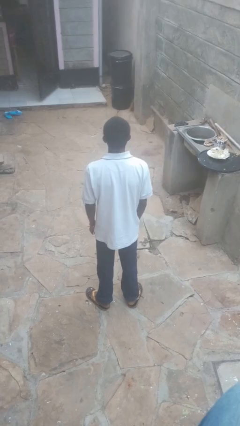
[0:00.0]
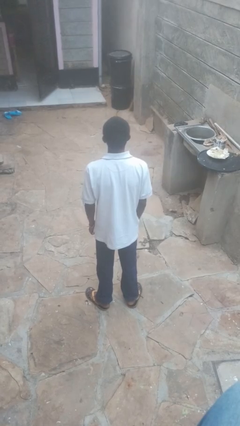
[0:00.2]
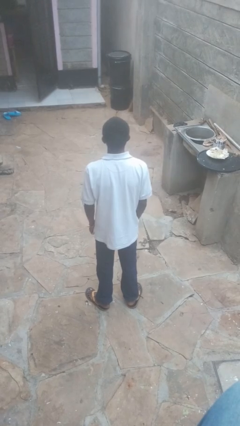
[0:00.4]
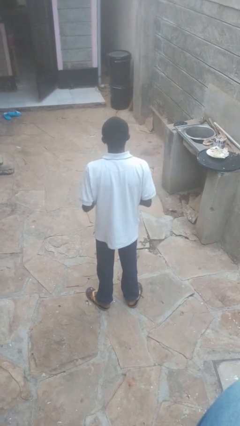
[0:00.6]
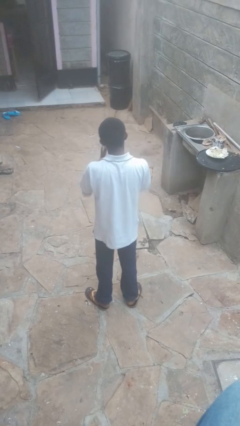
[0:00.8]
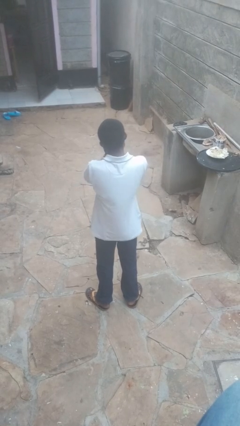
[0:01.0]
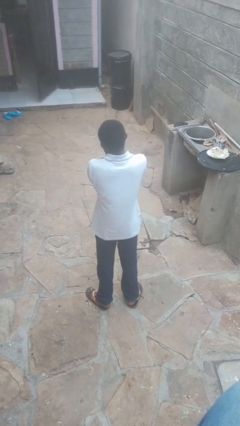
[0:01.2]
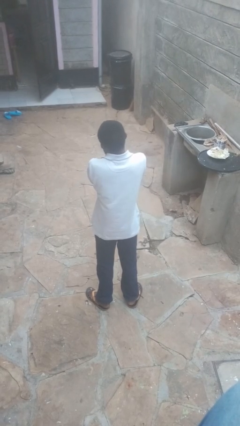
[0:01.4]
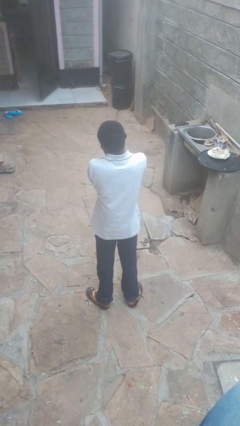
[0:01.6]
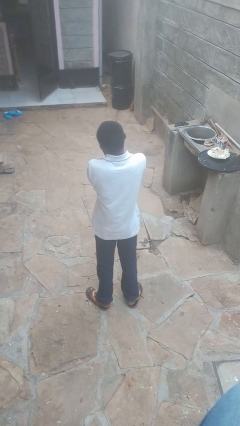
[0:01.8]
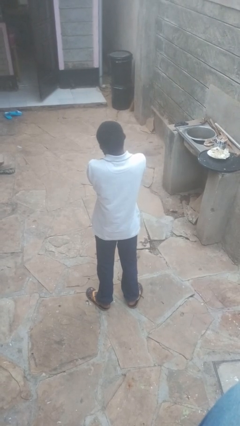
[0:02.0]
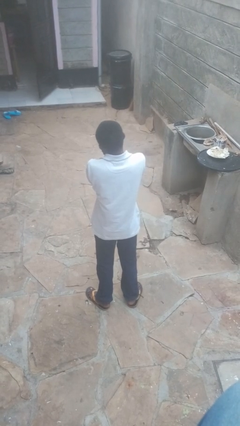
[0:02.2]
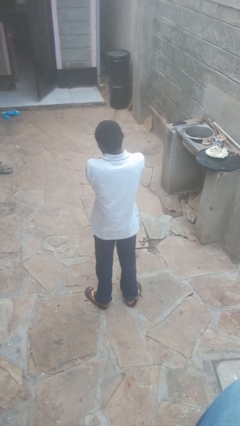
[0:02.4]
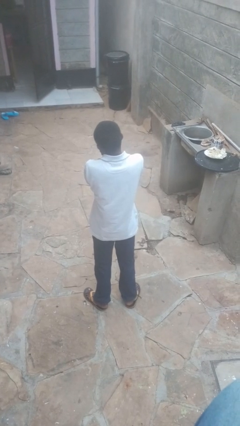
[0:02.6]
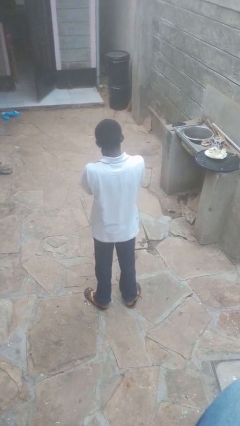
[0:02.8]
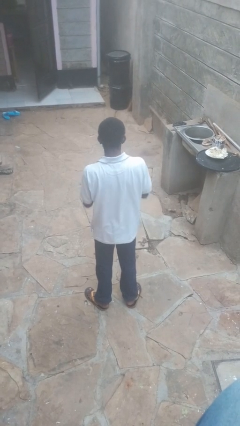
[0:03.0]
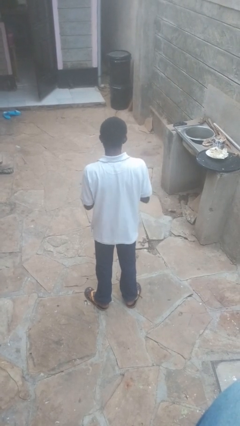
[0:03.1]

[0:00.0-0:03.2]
person covers face with hands

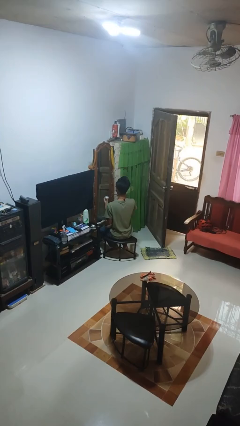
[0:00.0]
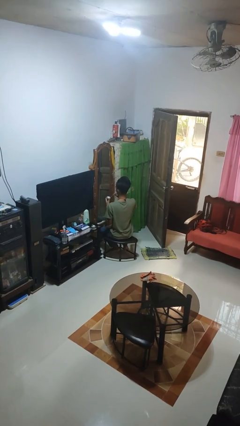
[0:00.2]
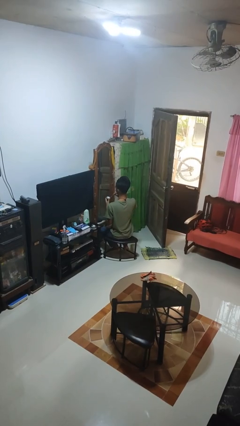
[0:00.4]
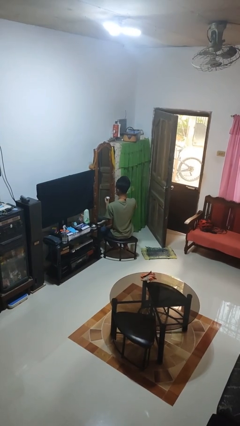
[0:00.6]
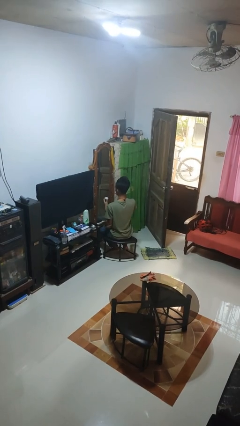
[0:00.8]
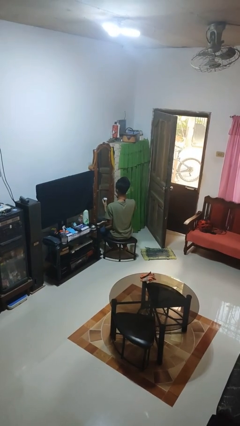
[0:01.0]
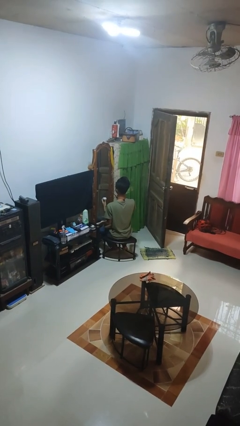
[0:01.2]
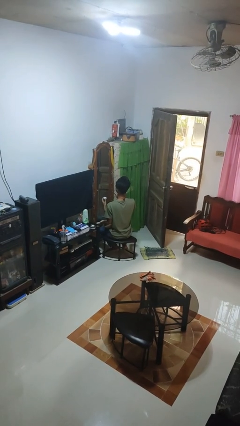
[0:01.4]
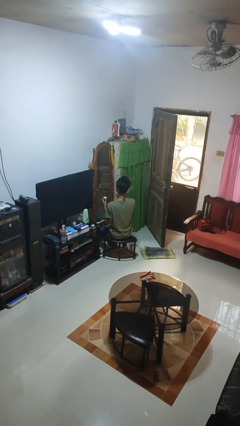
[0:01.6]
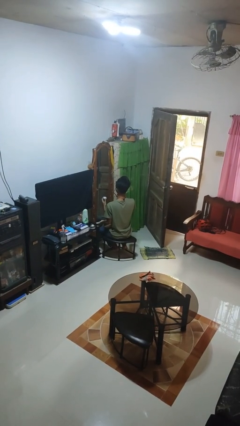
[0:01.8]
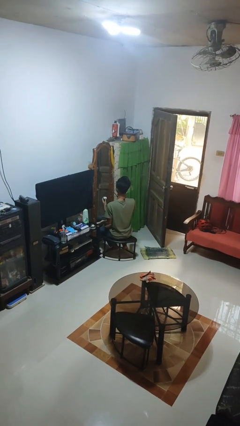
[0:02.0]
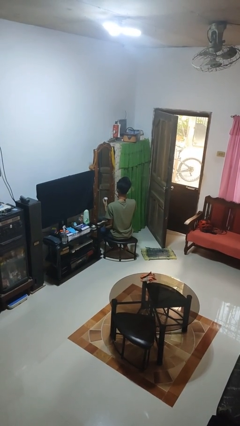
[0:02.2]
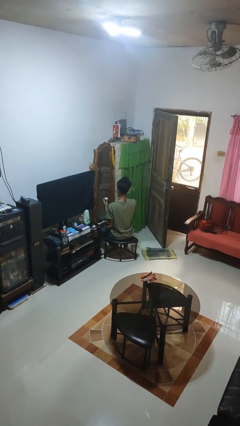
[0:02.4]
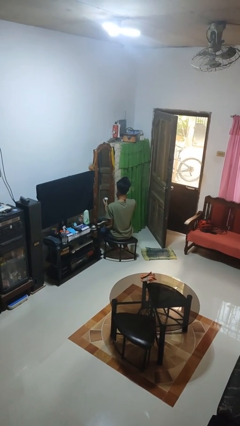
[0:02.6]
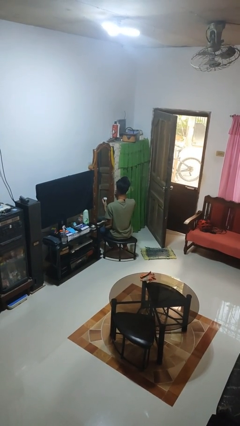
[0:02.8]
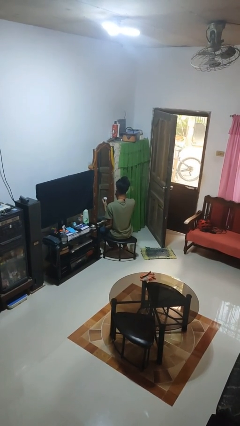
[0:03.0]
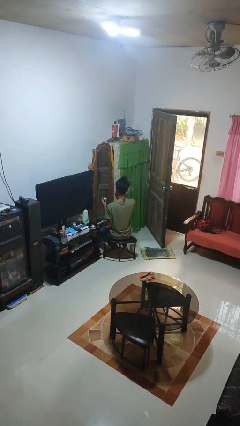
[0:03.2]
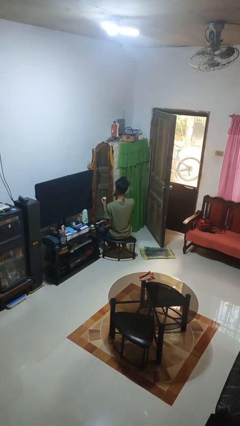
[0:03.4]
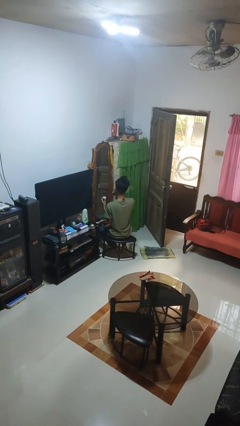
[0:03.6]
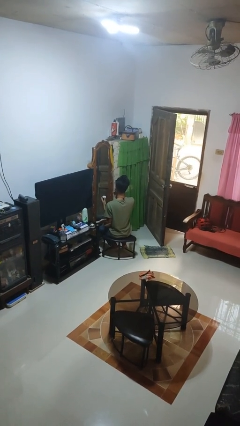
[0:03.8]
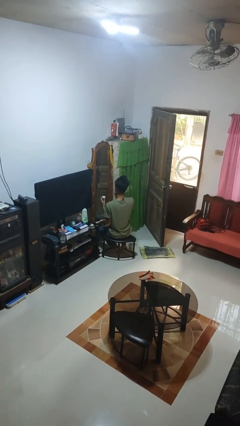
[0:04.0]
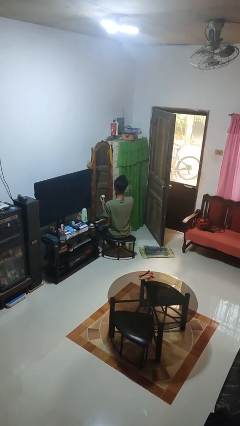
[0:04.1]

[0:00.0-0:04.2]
person applies eye makeup

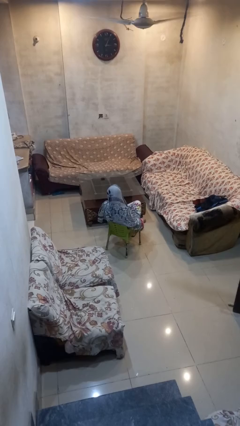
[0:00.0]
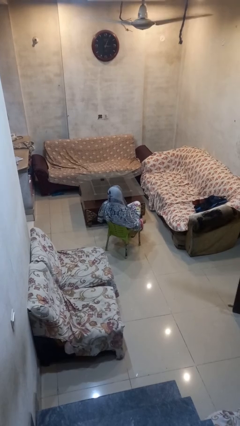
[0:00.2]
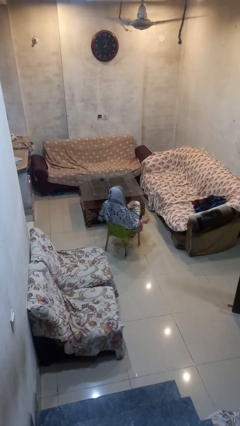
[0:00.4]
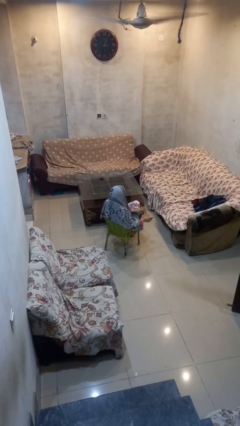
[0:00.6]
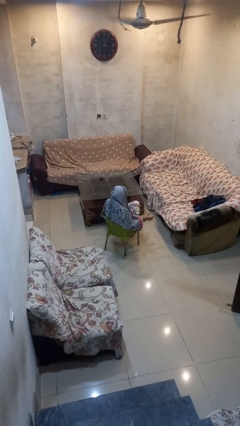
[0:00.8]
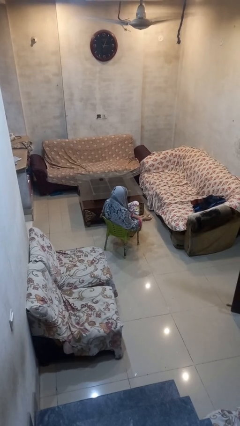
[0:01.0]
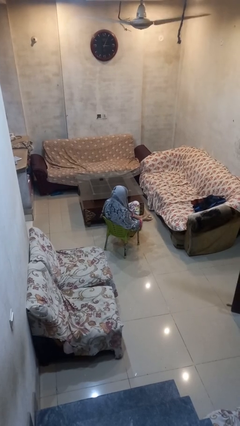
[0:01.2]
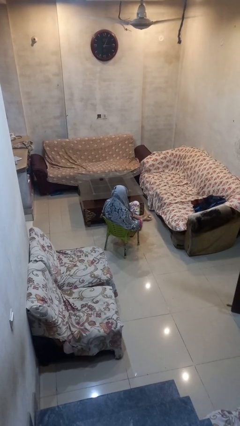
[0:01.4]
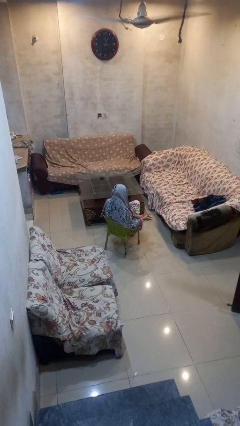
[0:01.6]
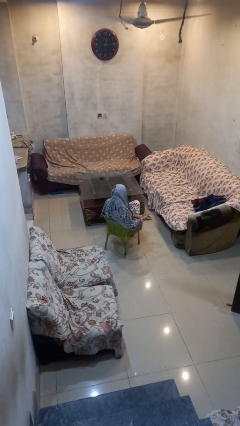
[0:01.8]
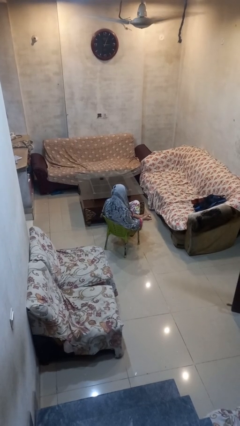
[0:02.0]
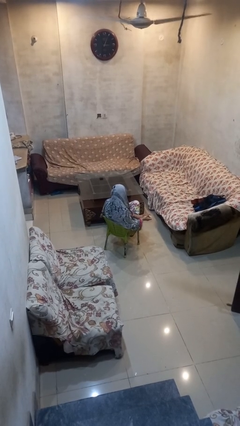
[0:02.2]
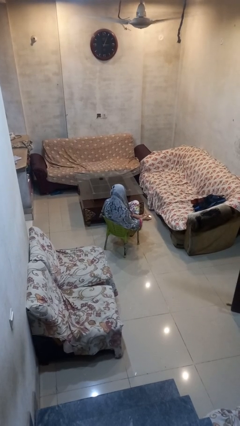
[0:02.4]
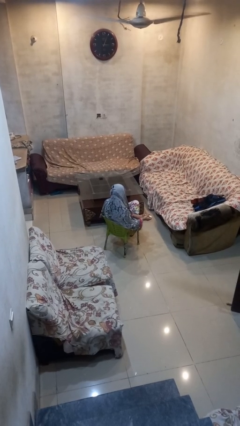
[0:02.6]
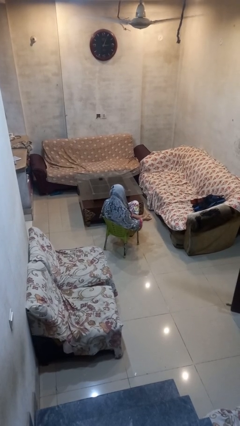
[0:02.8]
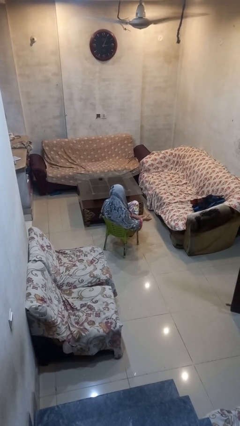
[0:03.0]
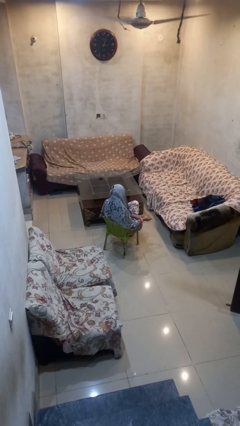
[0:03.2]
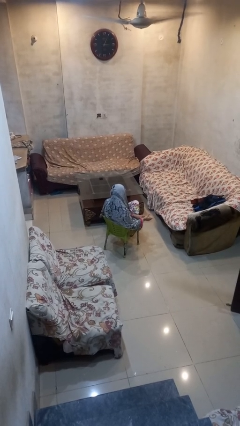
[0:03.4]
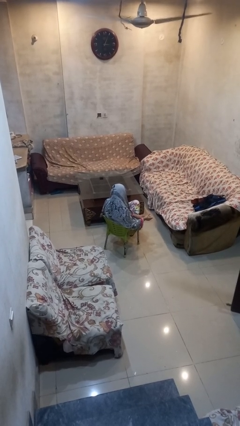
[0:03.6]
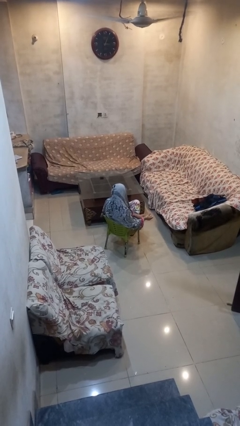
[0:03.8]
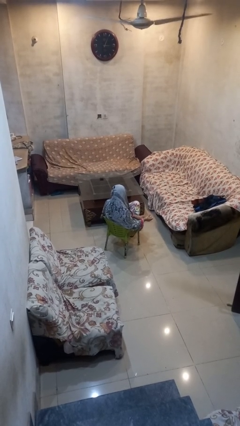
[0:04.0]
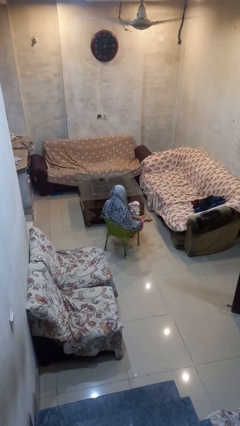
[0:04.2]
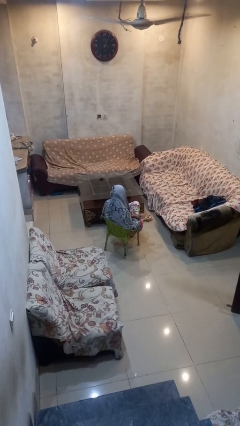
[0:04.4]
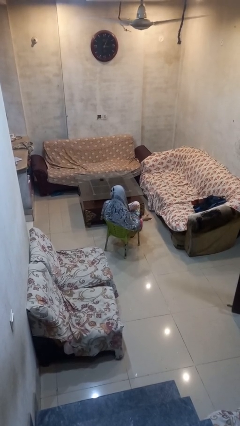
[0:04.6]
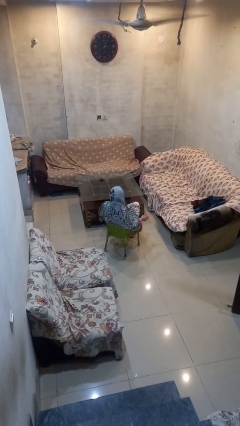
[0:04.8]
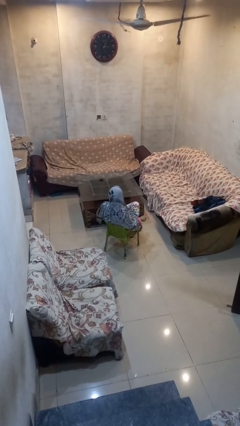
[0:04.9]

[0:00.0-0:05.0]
person clips fingernails

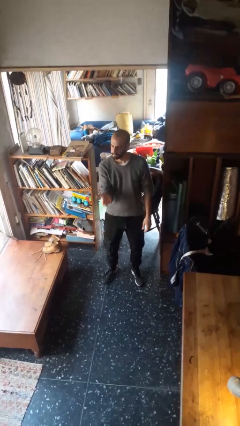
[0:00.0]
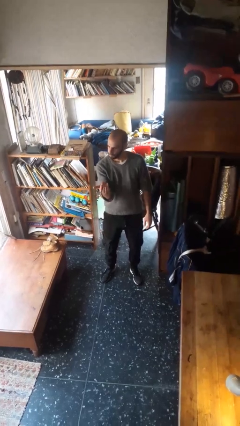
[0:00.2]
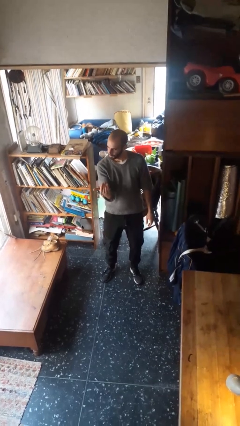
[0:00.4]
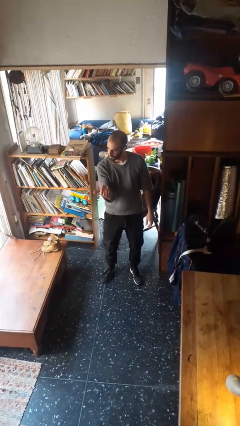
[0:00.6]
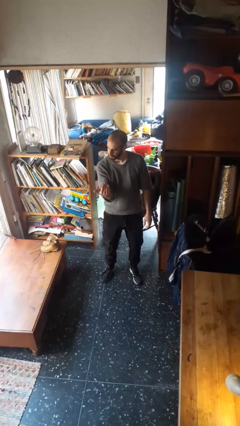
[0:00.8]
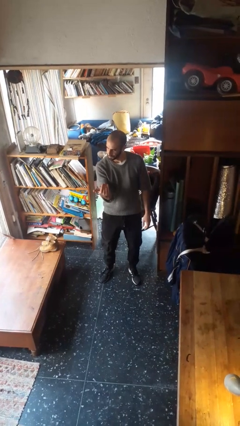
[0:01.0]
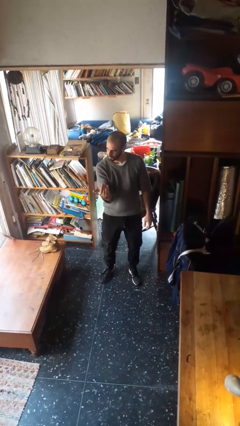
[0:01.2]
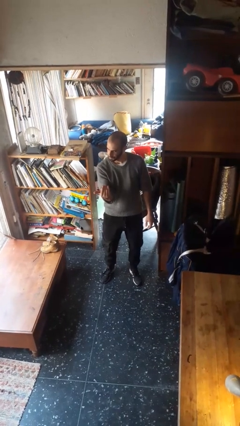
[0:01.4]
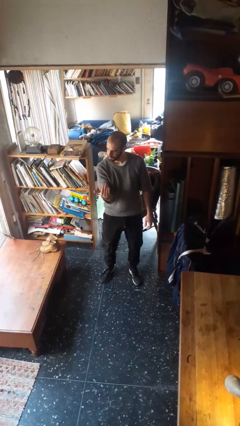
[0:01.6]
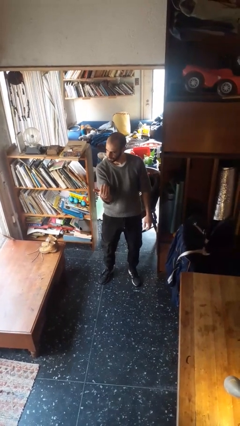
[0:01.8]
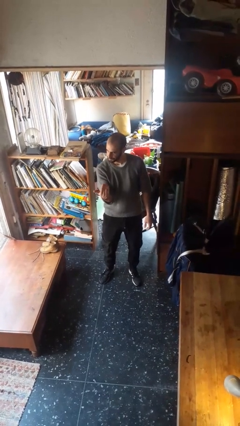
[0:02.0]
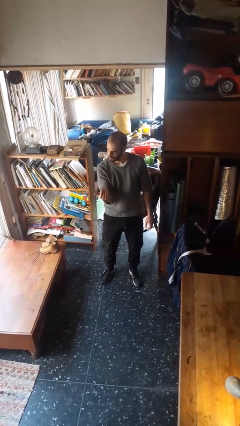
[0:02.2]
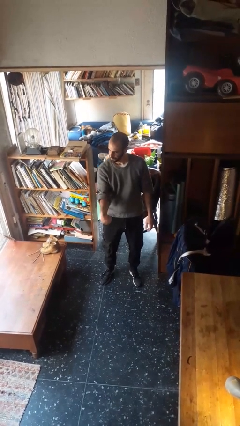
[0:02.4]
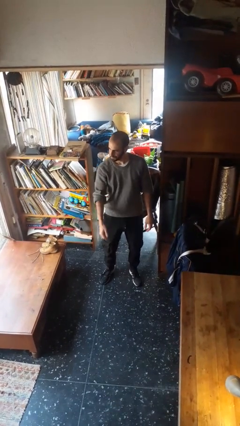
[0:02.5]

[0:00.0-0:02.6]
person gestures come here

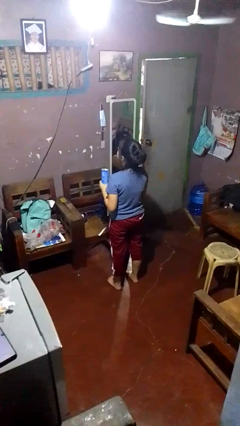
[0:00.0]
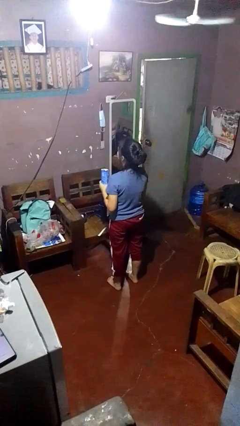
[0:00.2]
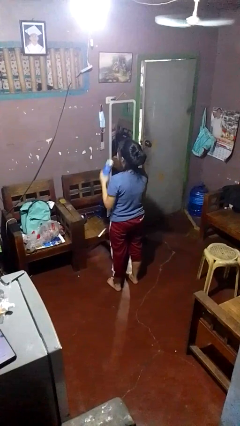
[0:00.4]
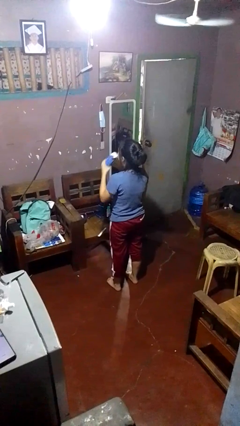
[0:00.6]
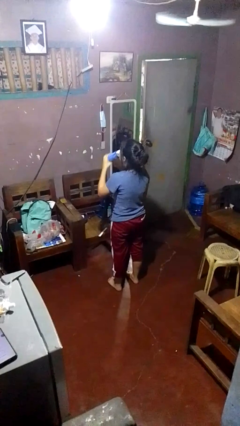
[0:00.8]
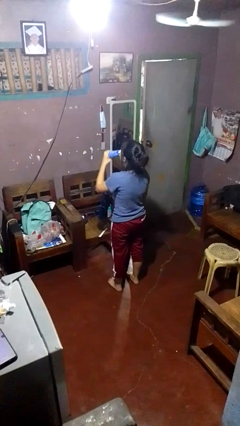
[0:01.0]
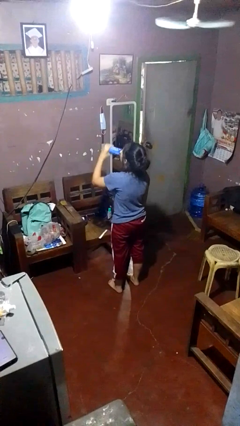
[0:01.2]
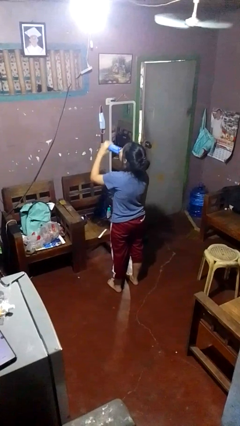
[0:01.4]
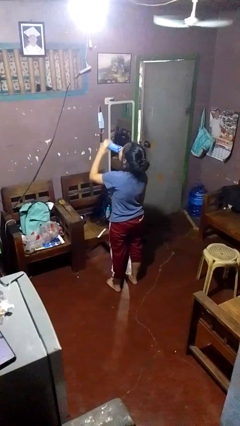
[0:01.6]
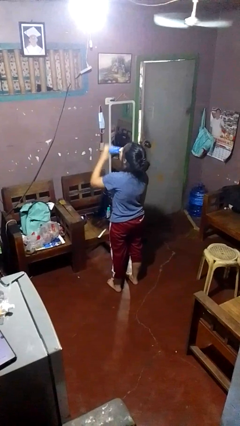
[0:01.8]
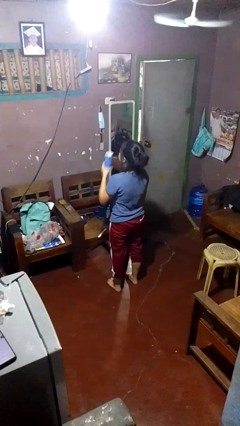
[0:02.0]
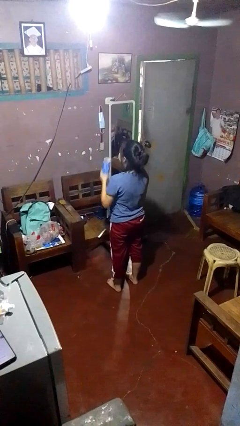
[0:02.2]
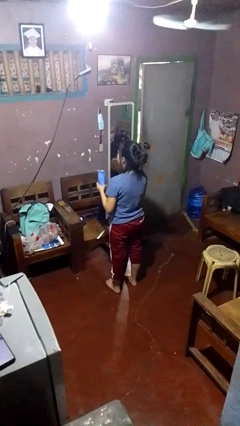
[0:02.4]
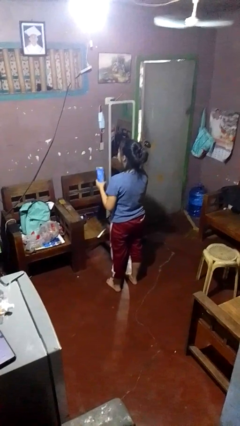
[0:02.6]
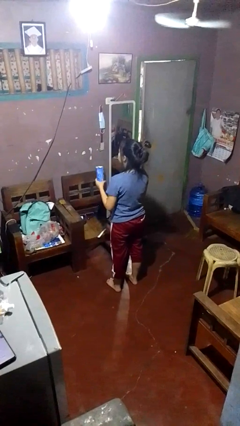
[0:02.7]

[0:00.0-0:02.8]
person drinks from beverage can
